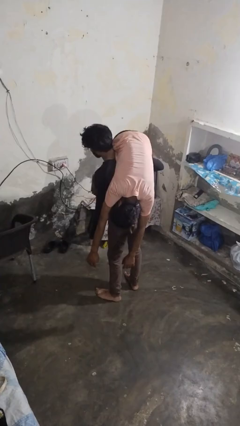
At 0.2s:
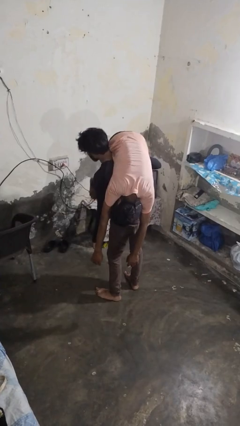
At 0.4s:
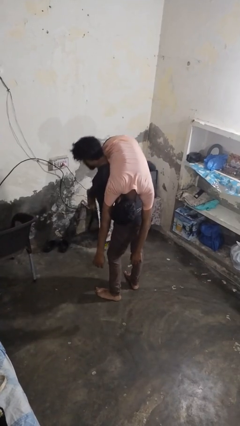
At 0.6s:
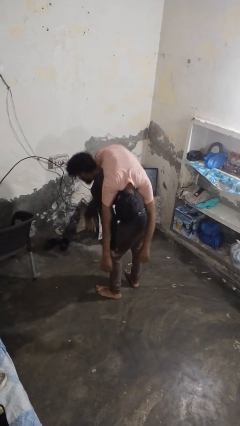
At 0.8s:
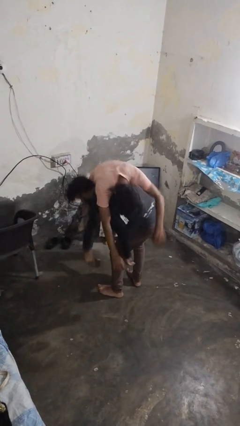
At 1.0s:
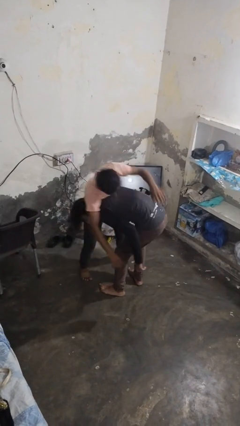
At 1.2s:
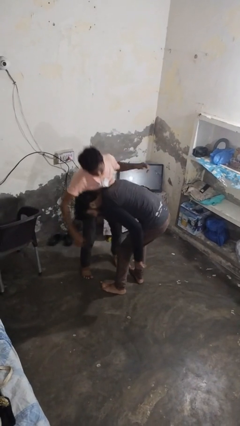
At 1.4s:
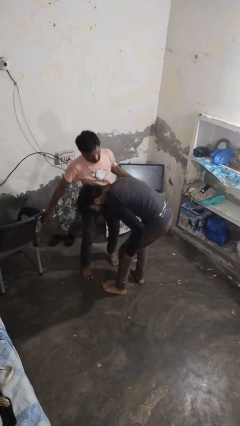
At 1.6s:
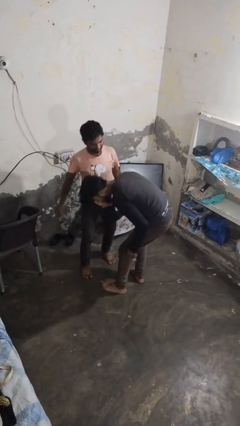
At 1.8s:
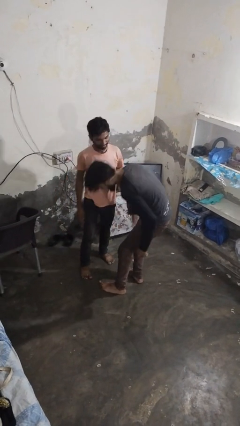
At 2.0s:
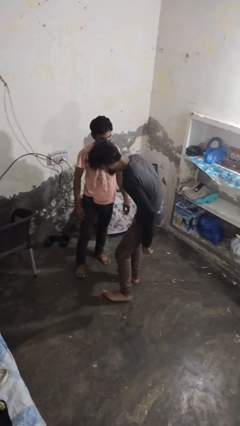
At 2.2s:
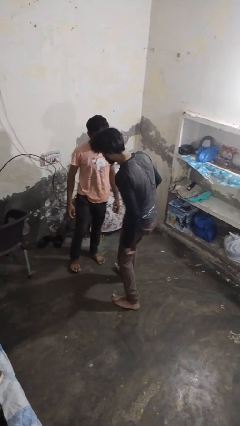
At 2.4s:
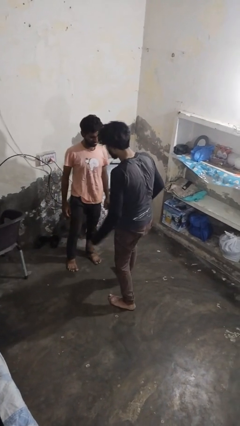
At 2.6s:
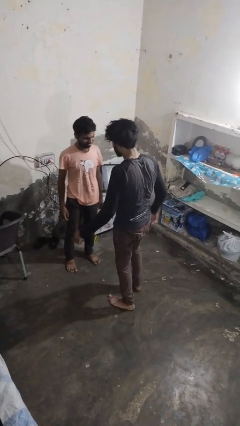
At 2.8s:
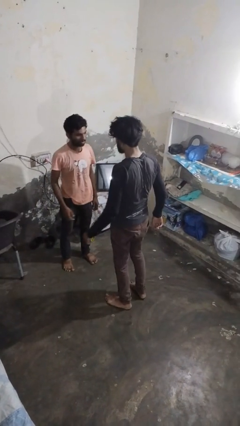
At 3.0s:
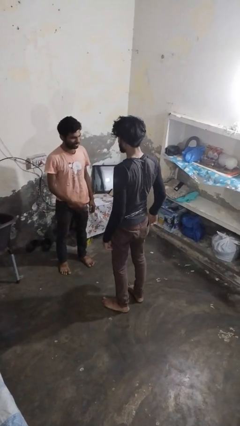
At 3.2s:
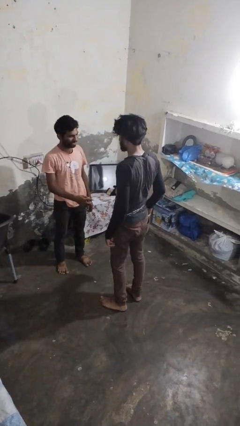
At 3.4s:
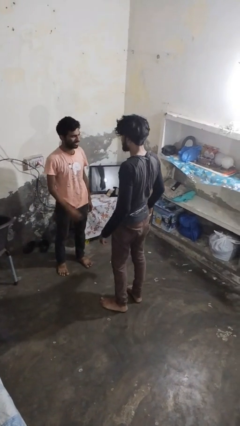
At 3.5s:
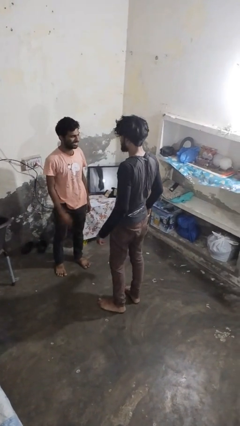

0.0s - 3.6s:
person puts down person

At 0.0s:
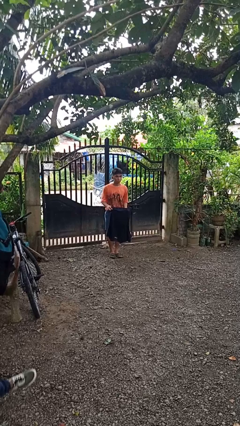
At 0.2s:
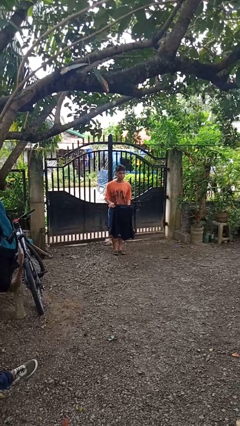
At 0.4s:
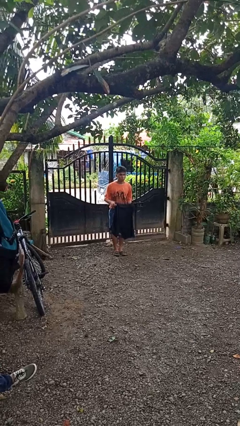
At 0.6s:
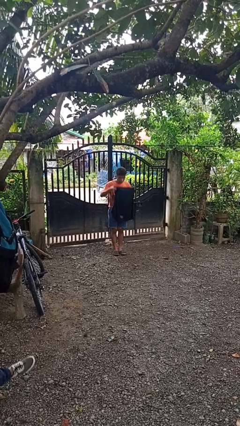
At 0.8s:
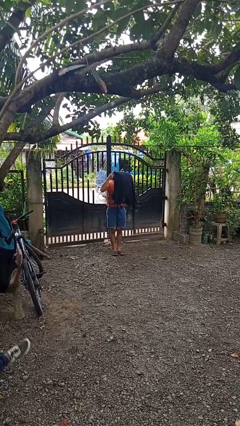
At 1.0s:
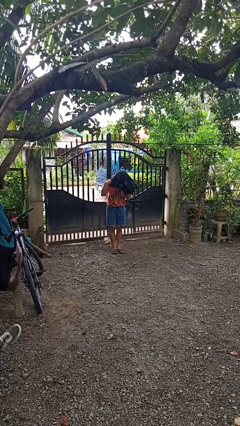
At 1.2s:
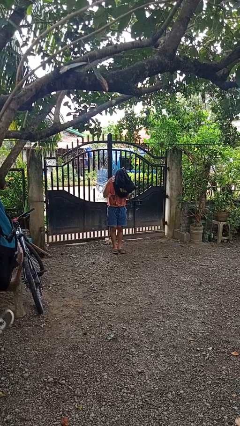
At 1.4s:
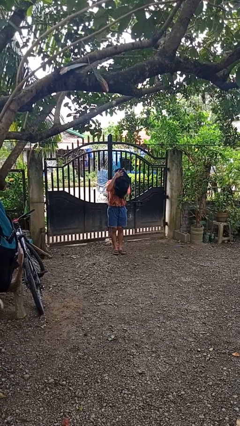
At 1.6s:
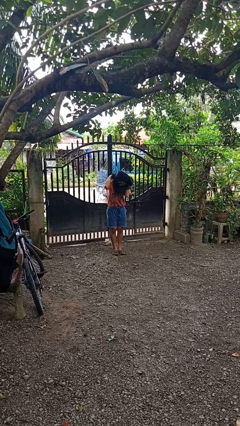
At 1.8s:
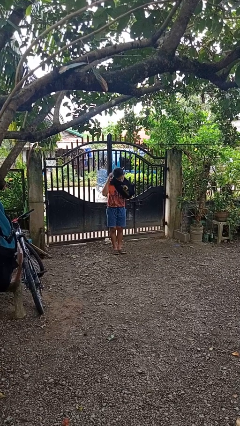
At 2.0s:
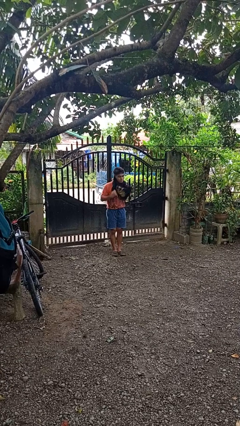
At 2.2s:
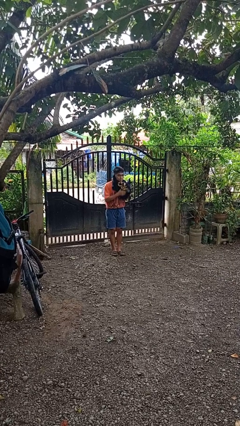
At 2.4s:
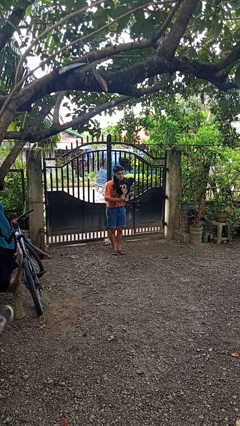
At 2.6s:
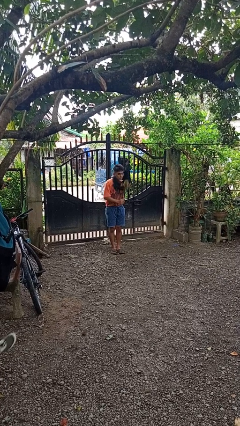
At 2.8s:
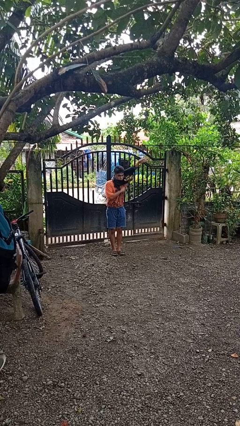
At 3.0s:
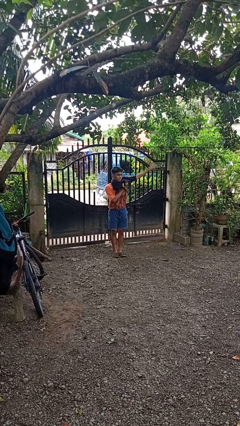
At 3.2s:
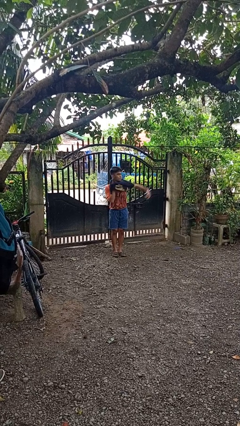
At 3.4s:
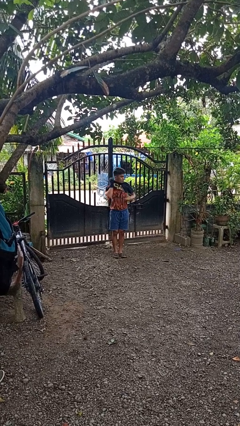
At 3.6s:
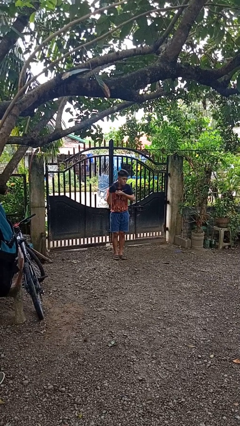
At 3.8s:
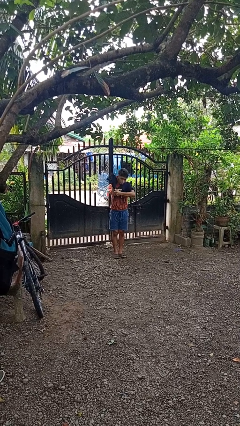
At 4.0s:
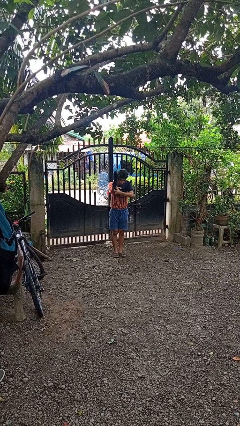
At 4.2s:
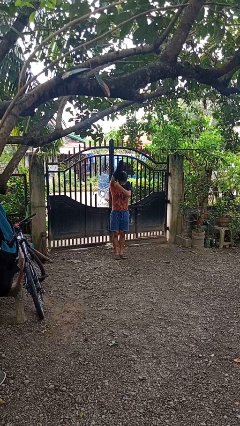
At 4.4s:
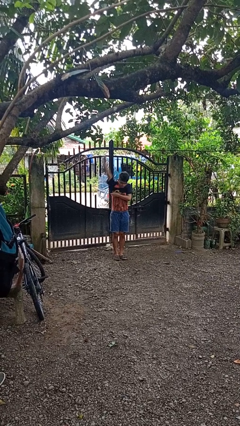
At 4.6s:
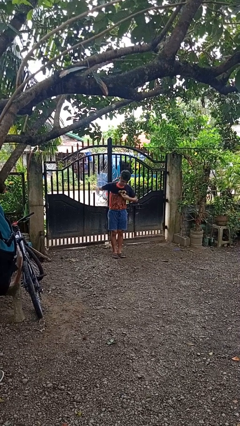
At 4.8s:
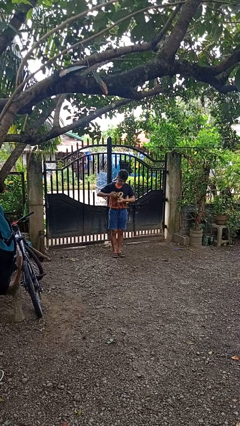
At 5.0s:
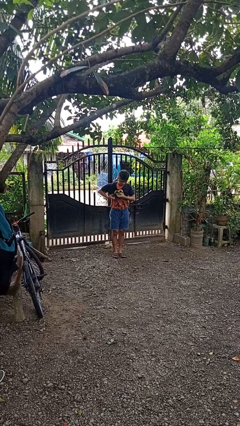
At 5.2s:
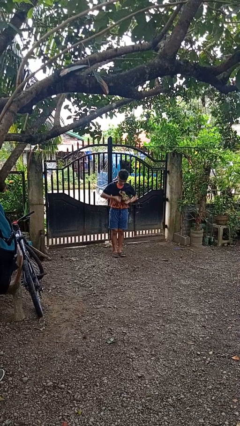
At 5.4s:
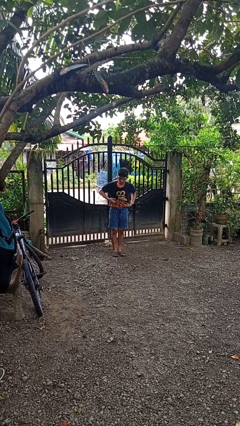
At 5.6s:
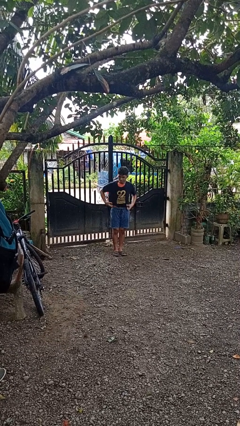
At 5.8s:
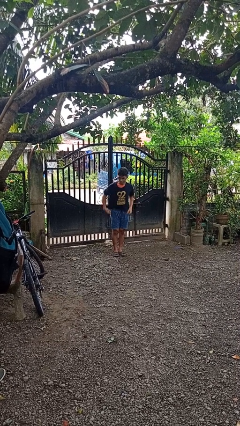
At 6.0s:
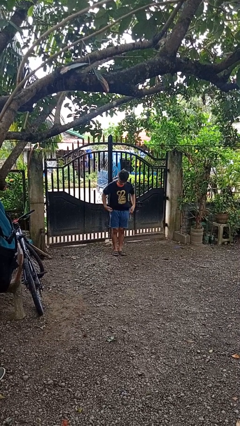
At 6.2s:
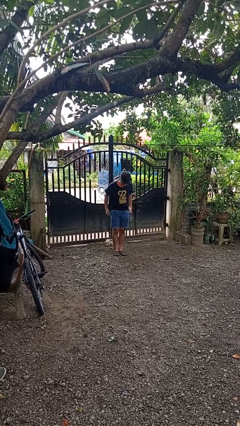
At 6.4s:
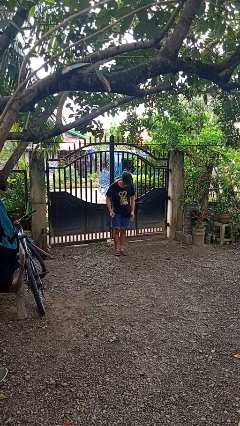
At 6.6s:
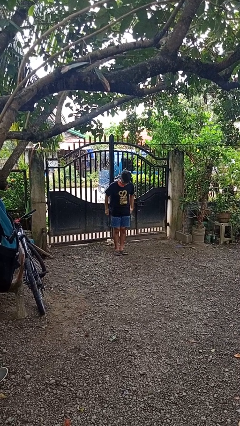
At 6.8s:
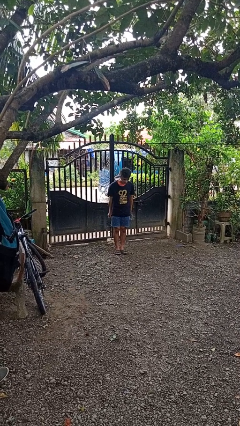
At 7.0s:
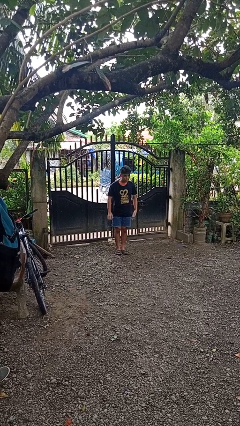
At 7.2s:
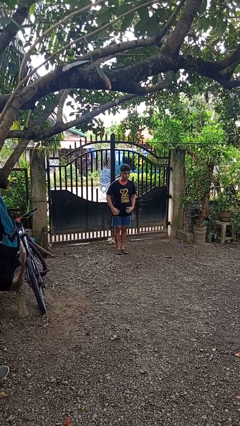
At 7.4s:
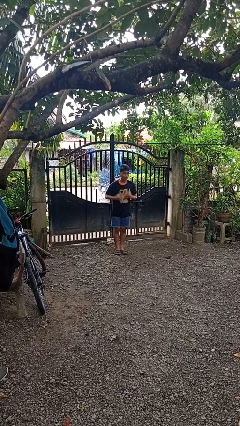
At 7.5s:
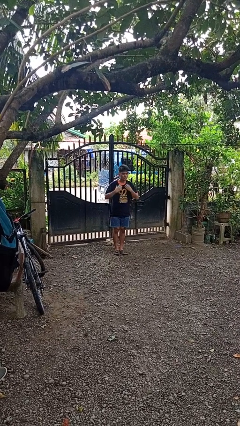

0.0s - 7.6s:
person puts on shirt

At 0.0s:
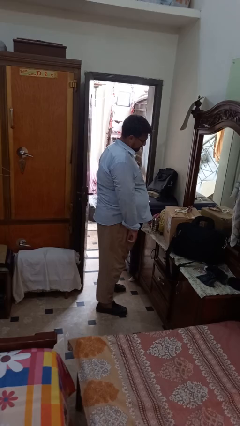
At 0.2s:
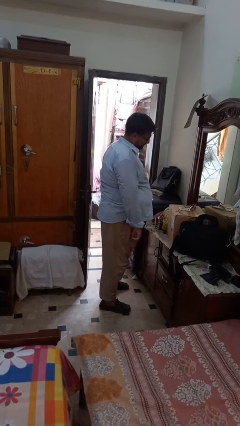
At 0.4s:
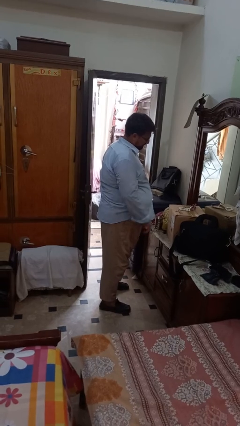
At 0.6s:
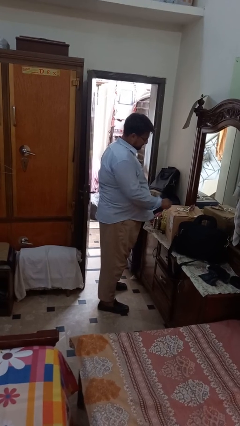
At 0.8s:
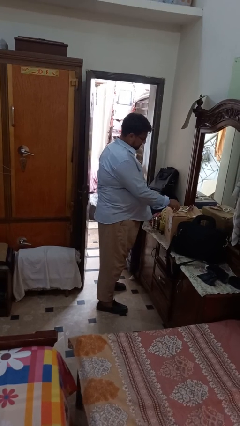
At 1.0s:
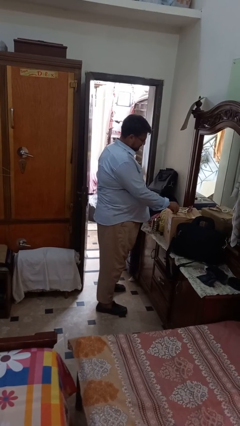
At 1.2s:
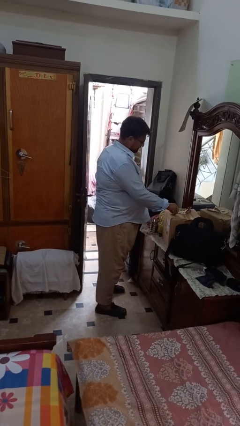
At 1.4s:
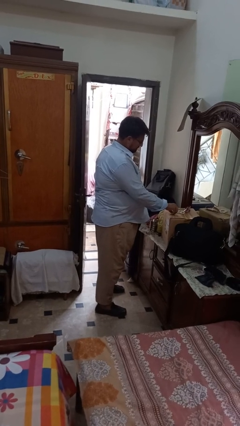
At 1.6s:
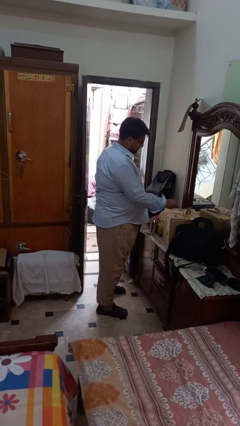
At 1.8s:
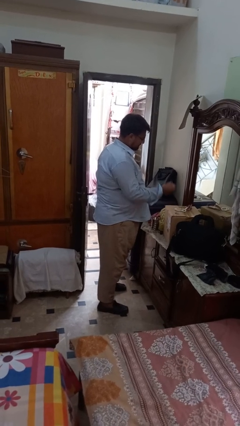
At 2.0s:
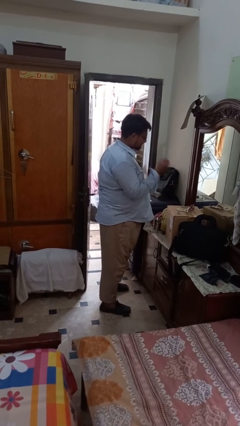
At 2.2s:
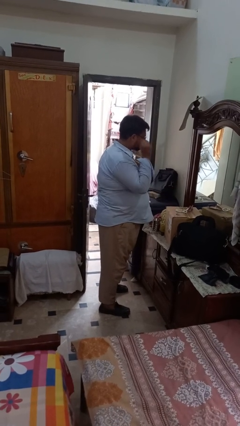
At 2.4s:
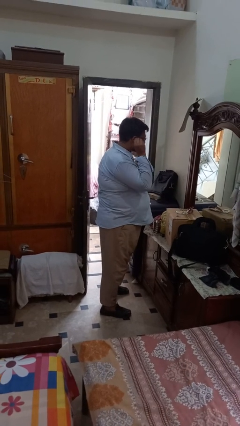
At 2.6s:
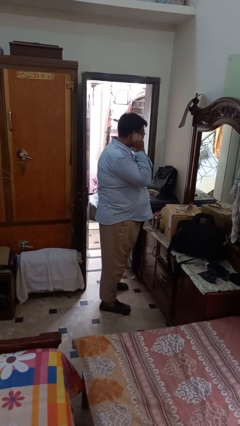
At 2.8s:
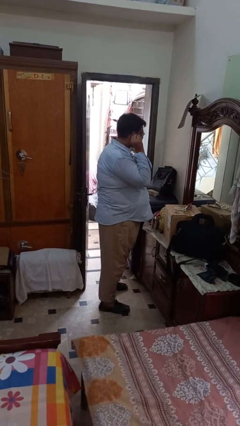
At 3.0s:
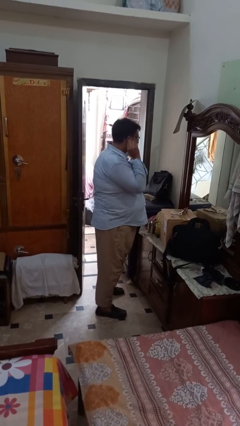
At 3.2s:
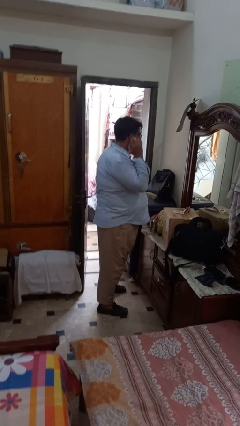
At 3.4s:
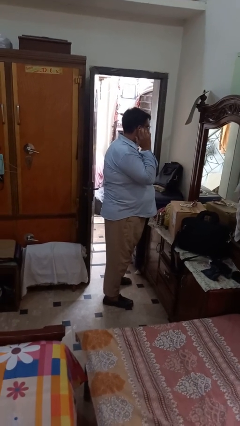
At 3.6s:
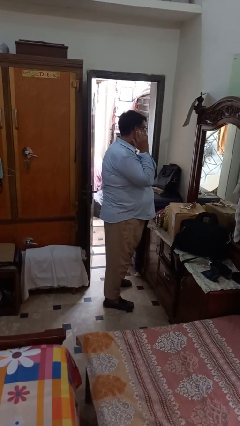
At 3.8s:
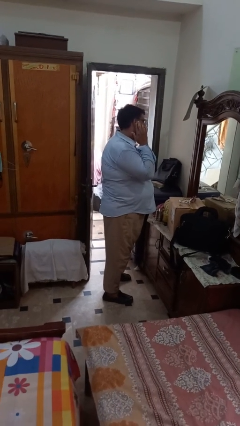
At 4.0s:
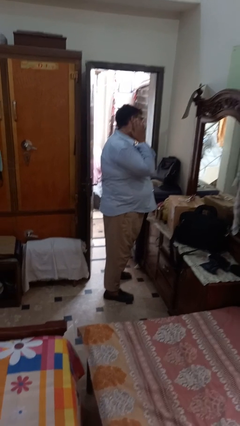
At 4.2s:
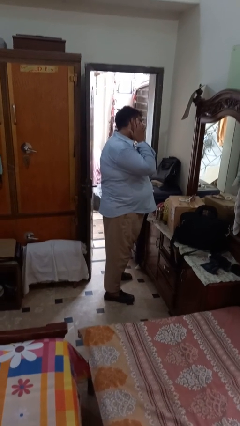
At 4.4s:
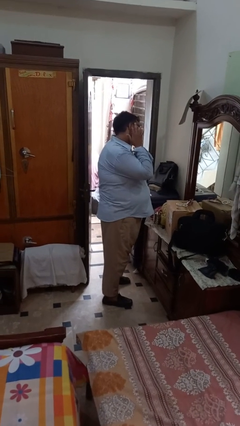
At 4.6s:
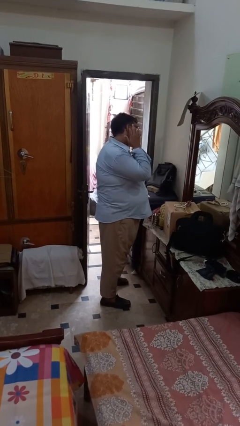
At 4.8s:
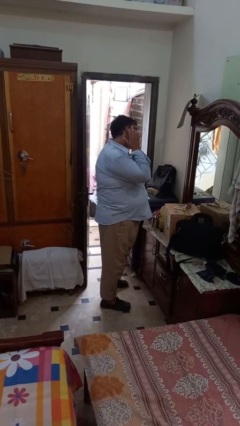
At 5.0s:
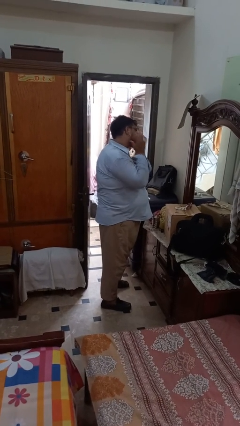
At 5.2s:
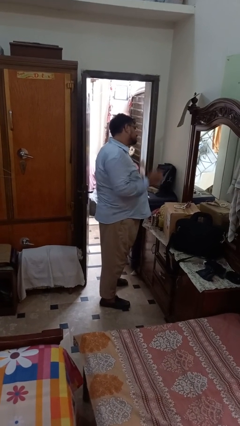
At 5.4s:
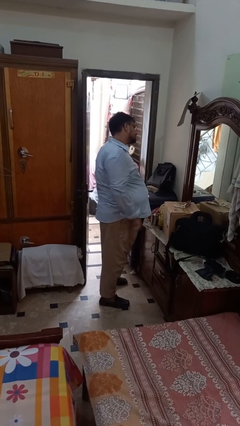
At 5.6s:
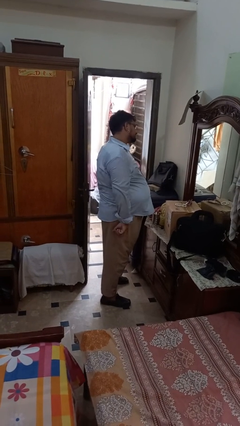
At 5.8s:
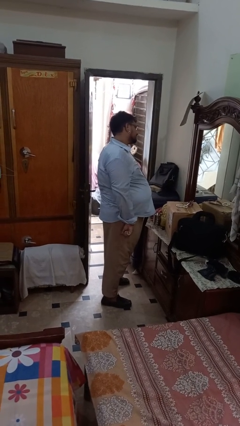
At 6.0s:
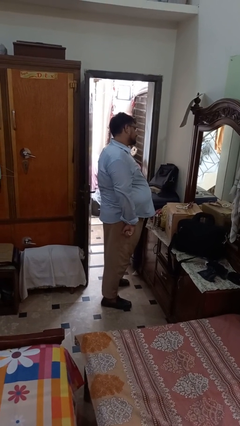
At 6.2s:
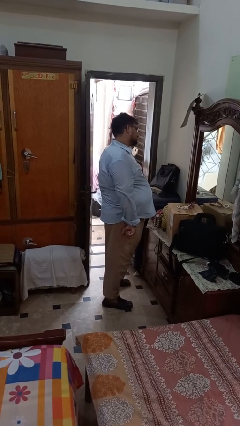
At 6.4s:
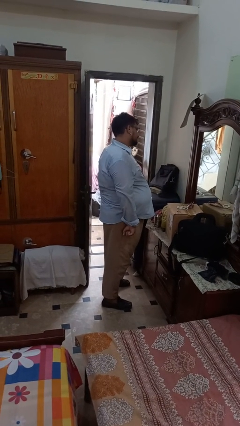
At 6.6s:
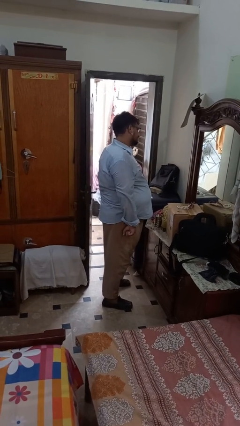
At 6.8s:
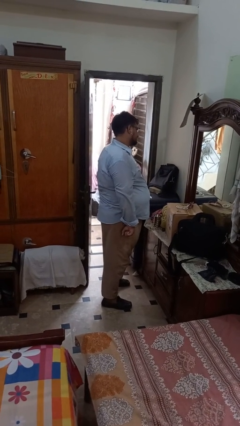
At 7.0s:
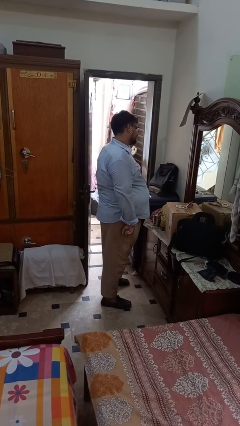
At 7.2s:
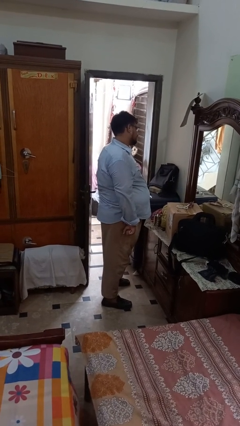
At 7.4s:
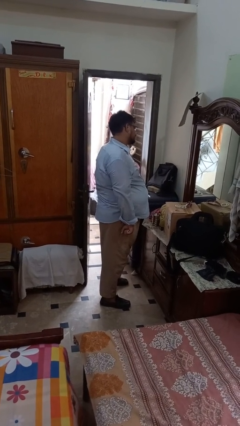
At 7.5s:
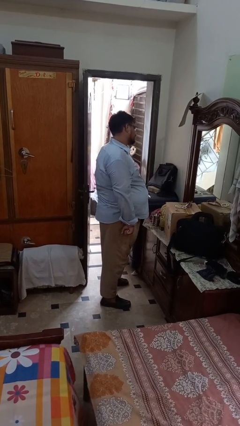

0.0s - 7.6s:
person puts on earrings
